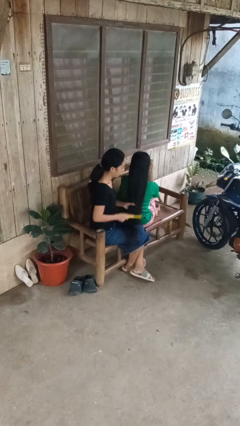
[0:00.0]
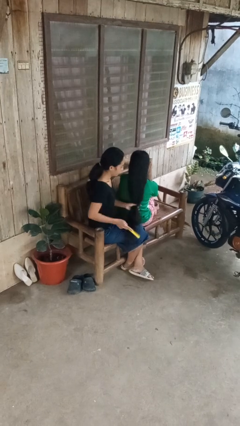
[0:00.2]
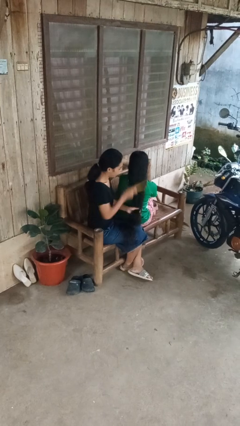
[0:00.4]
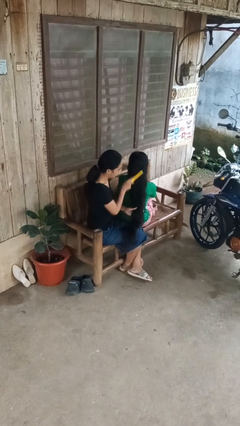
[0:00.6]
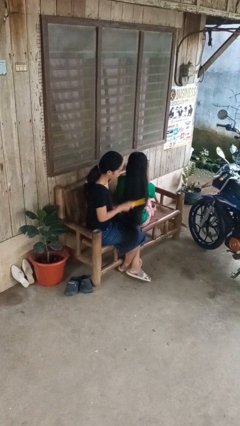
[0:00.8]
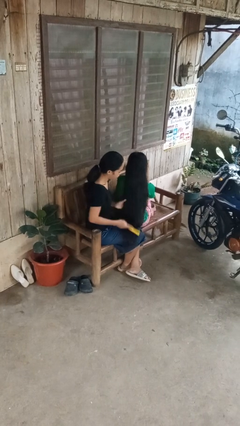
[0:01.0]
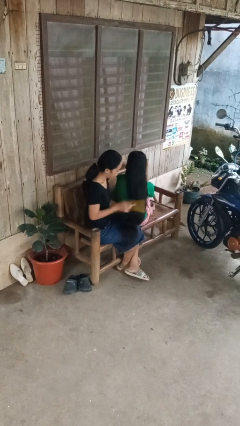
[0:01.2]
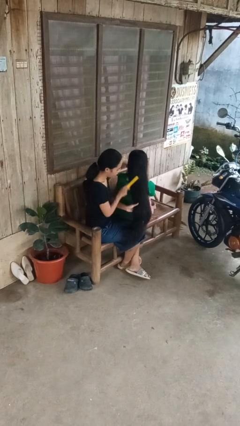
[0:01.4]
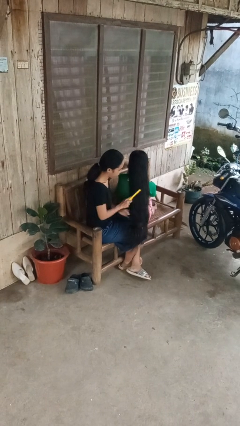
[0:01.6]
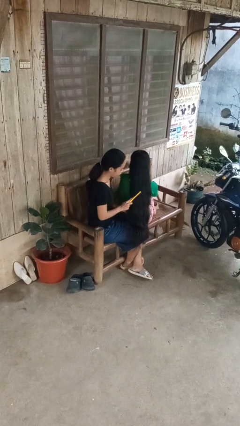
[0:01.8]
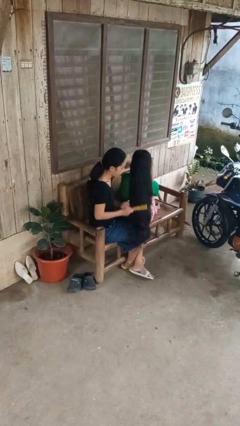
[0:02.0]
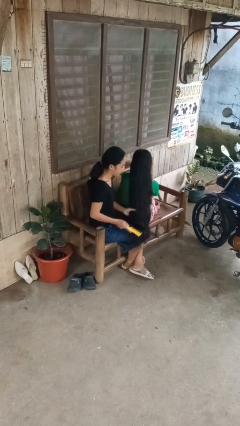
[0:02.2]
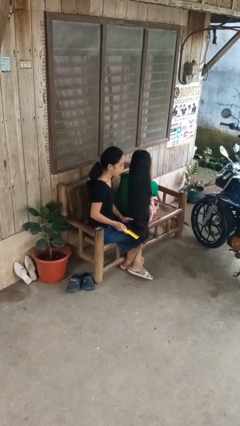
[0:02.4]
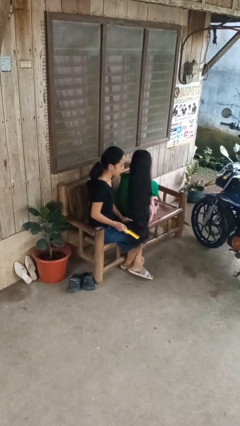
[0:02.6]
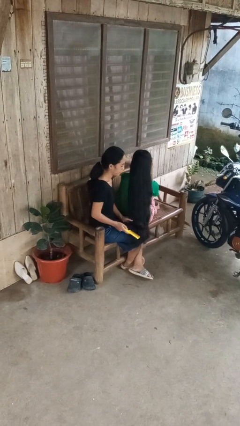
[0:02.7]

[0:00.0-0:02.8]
person brushes hair of person

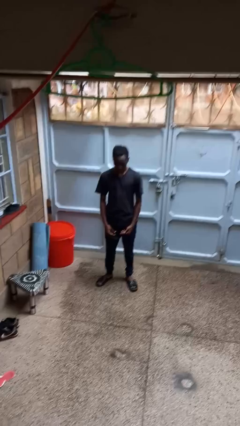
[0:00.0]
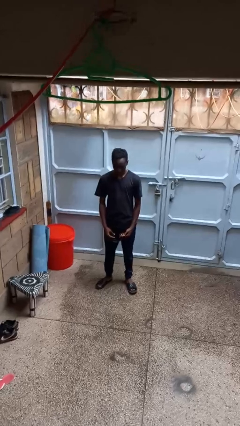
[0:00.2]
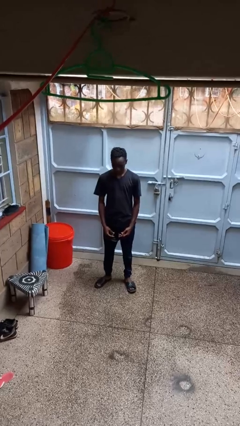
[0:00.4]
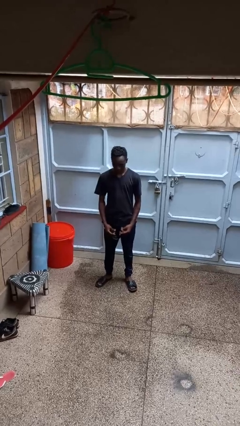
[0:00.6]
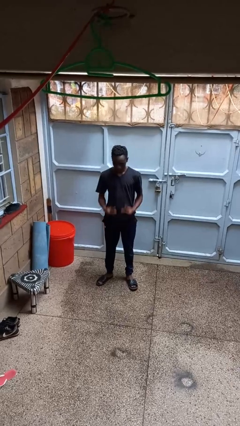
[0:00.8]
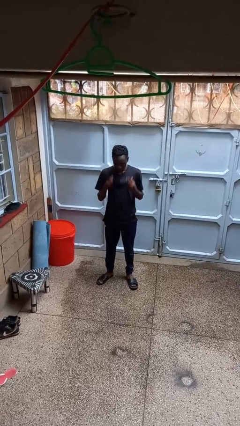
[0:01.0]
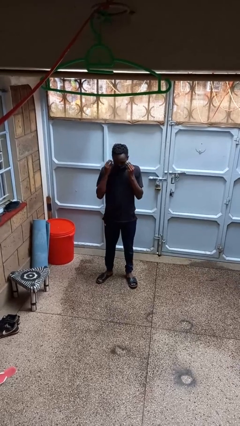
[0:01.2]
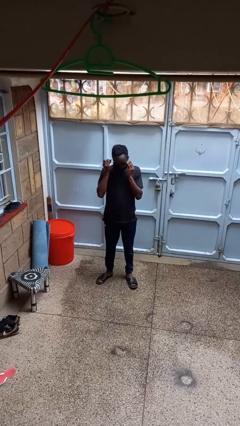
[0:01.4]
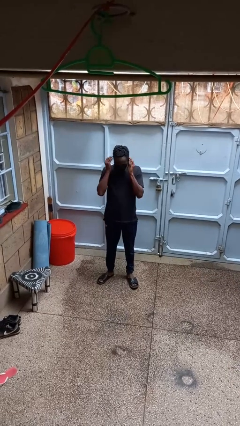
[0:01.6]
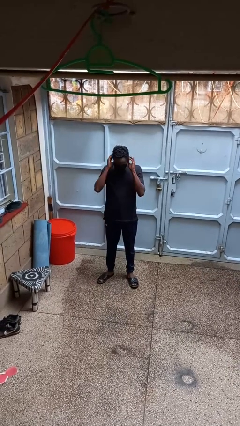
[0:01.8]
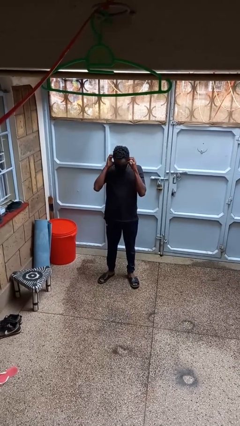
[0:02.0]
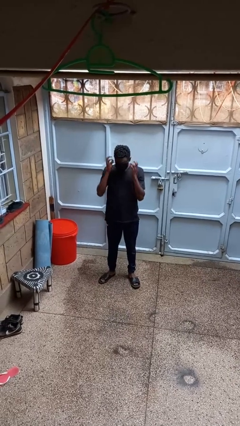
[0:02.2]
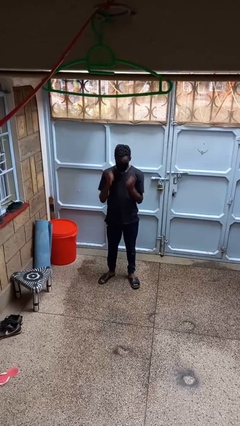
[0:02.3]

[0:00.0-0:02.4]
person puts on facemask

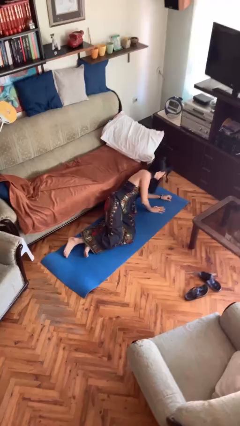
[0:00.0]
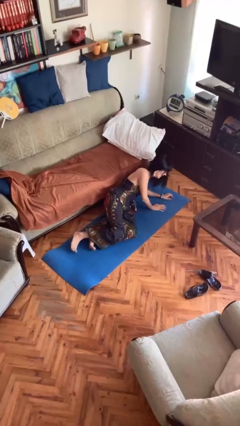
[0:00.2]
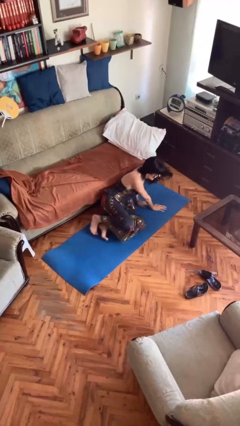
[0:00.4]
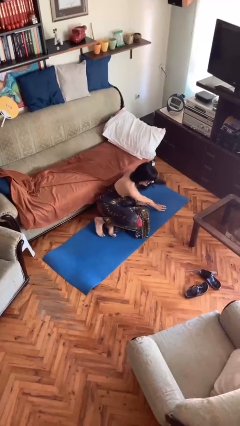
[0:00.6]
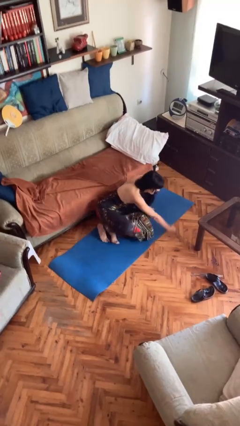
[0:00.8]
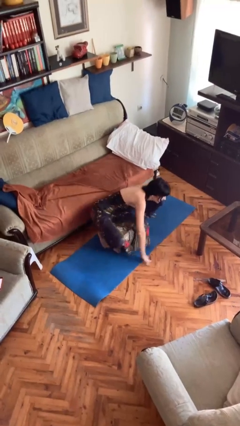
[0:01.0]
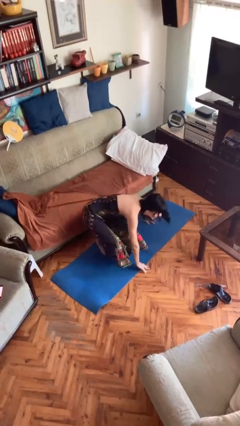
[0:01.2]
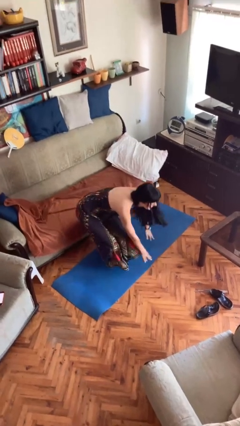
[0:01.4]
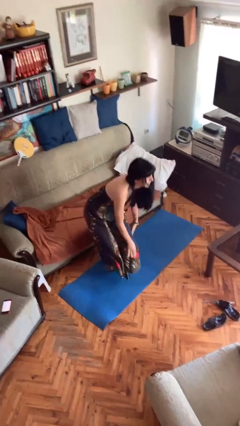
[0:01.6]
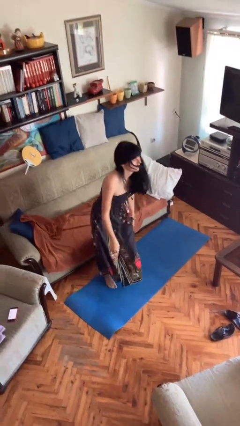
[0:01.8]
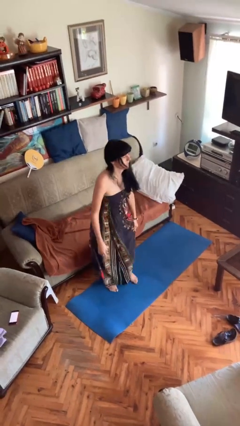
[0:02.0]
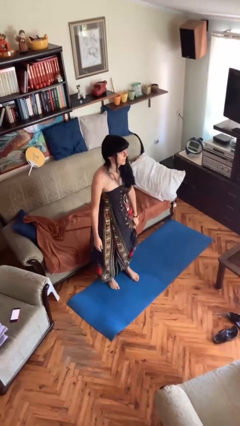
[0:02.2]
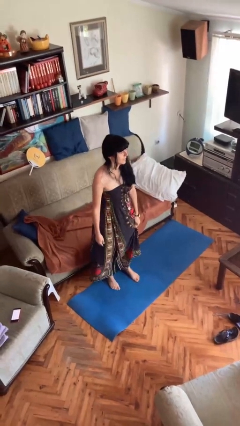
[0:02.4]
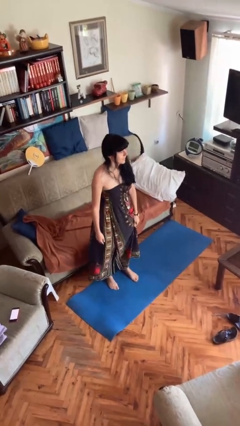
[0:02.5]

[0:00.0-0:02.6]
person stands up from floor

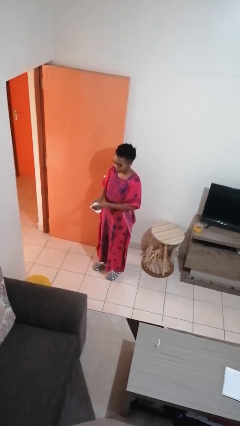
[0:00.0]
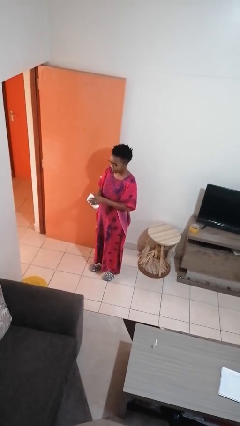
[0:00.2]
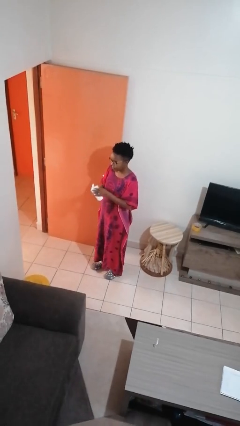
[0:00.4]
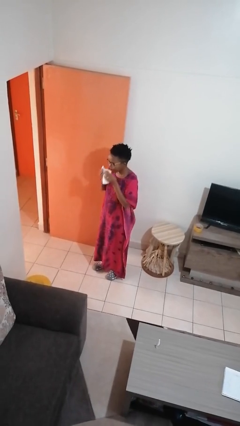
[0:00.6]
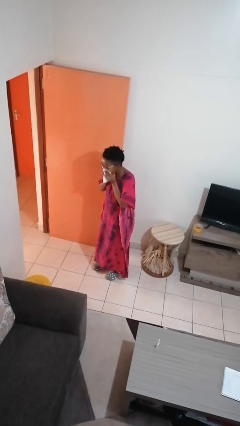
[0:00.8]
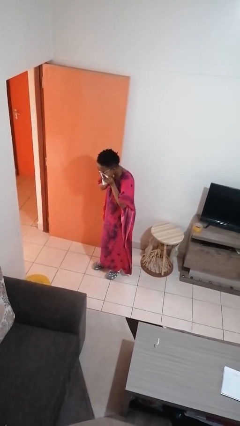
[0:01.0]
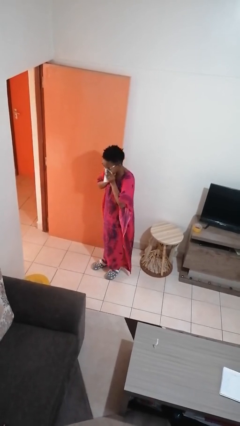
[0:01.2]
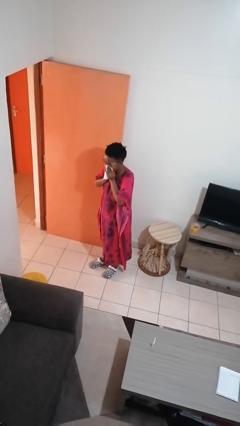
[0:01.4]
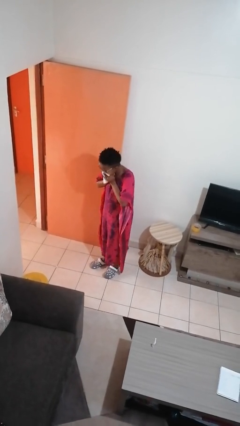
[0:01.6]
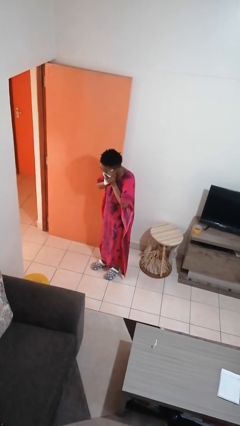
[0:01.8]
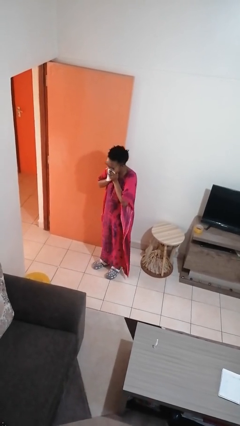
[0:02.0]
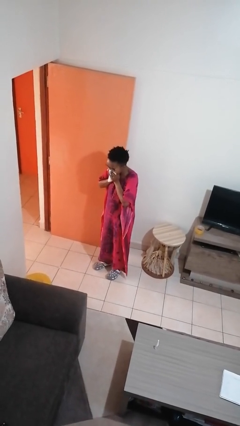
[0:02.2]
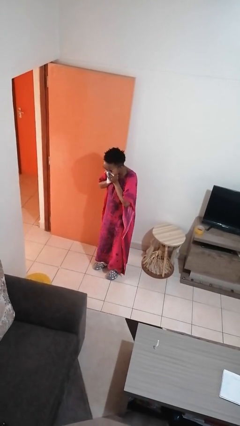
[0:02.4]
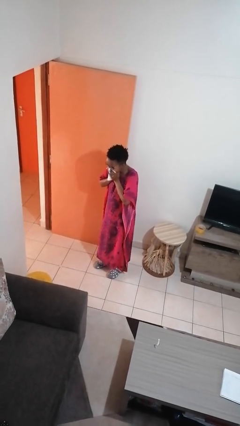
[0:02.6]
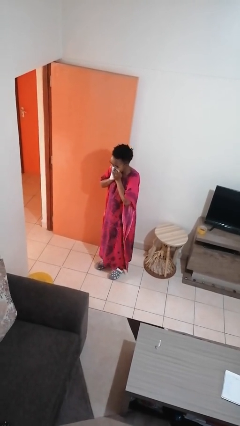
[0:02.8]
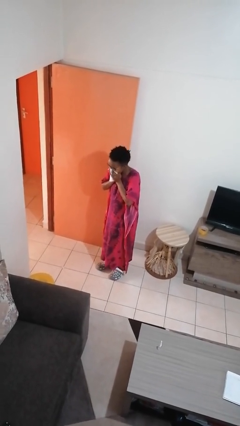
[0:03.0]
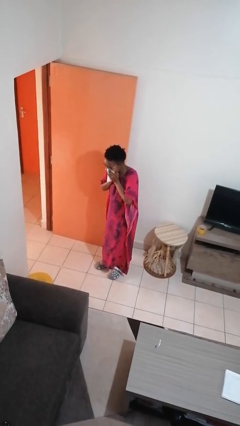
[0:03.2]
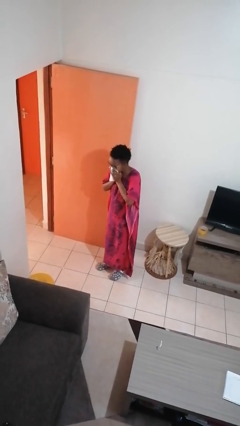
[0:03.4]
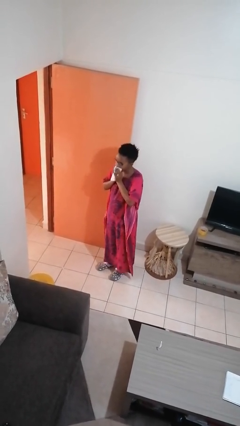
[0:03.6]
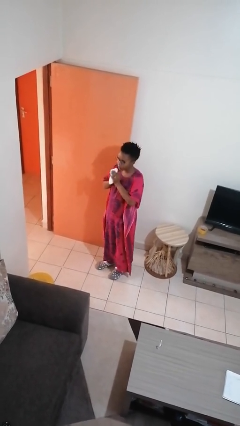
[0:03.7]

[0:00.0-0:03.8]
person blows nose

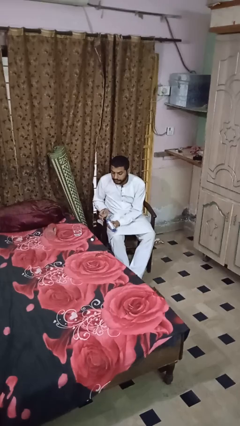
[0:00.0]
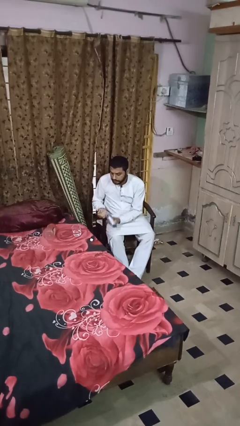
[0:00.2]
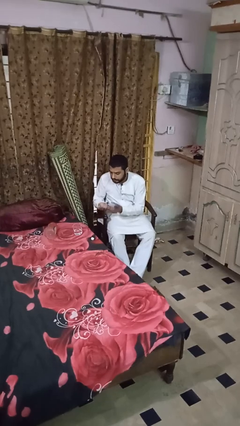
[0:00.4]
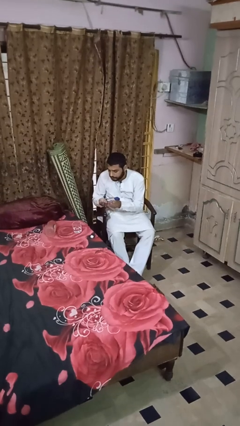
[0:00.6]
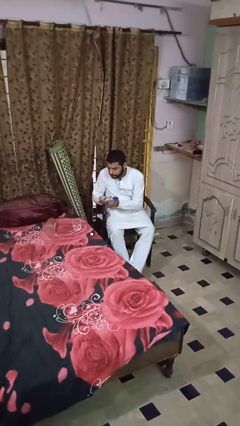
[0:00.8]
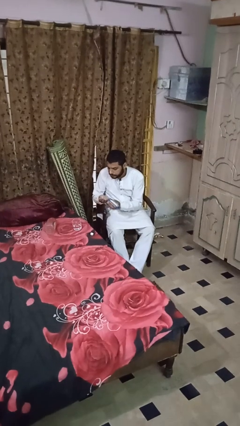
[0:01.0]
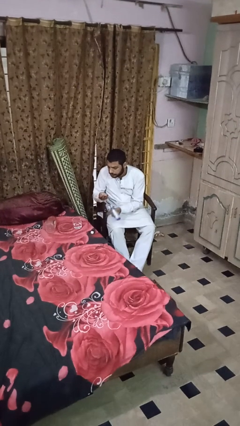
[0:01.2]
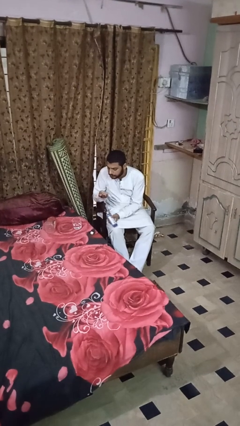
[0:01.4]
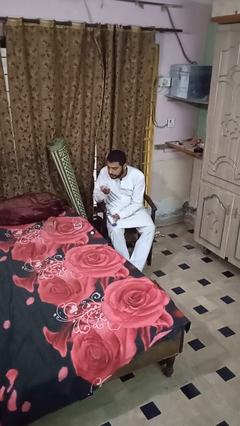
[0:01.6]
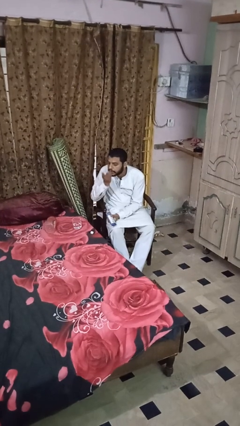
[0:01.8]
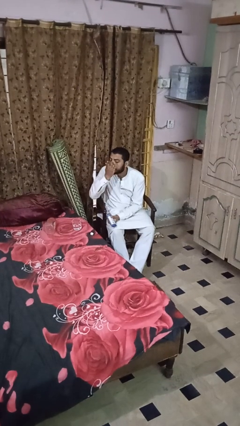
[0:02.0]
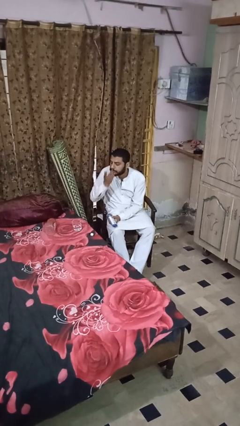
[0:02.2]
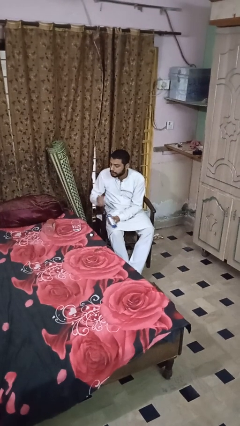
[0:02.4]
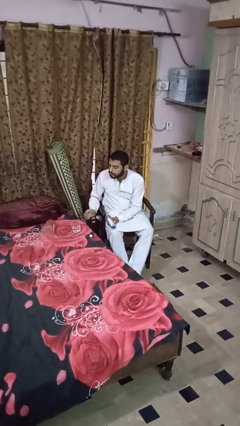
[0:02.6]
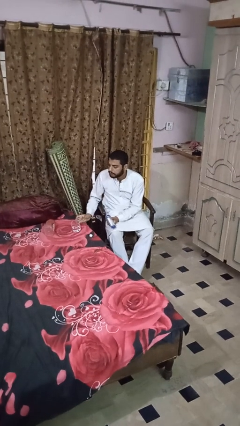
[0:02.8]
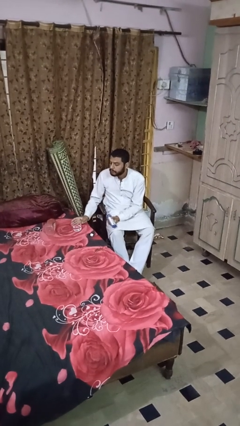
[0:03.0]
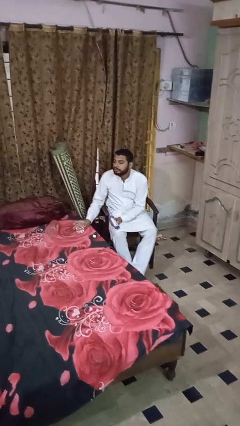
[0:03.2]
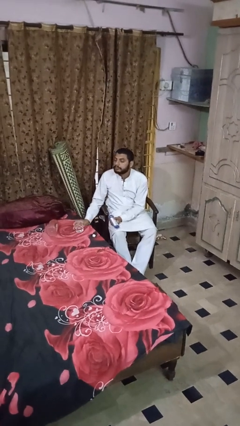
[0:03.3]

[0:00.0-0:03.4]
person takes medicine pills

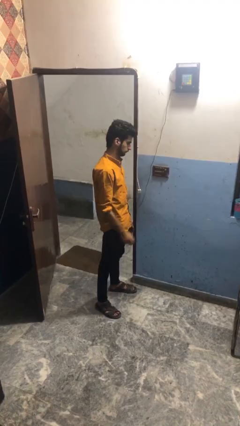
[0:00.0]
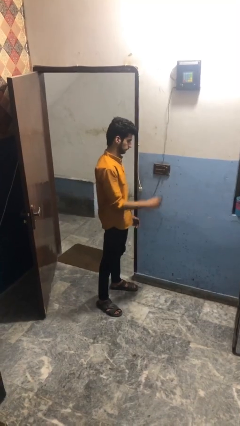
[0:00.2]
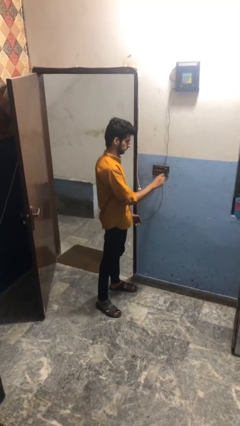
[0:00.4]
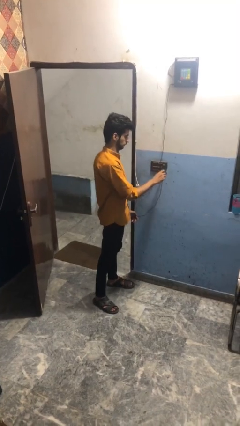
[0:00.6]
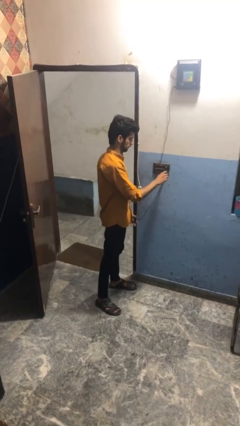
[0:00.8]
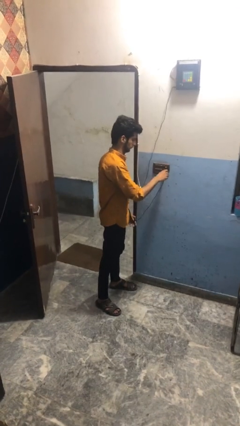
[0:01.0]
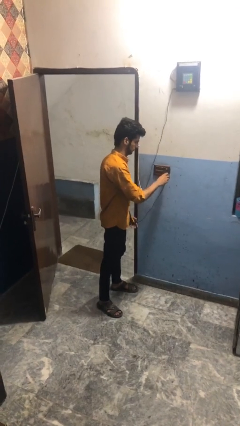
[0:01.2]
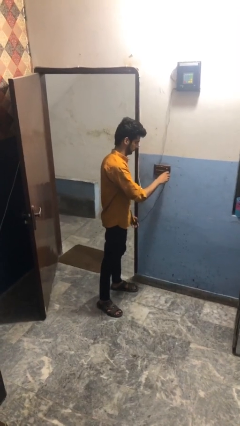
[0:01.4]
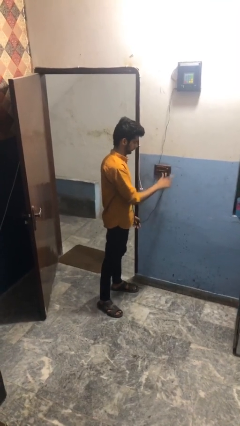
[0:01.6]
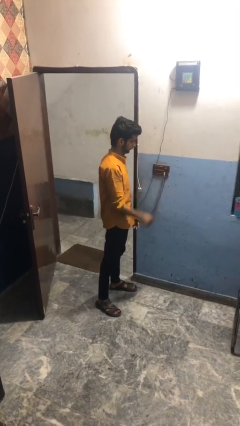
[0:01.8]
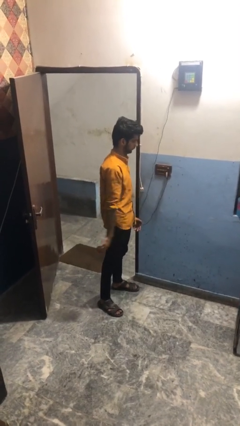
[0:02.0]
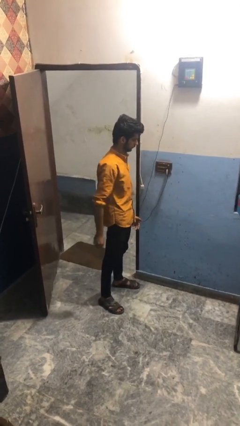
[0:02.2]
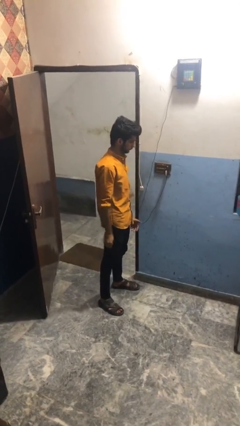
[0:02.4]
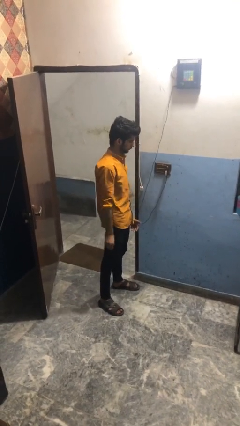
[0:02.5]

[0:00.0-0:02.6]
person plugs into electrical socket
